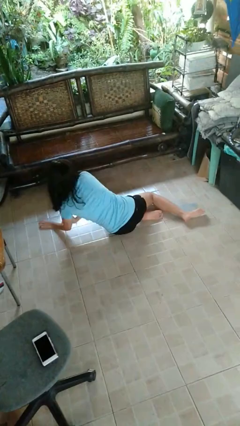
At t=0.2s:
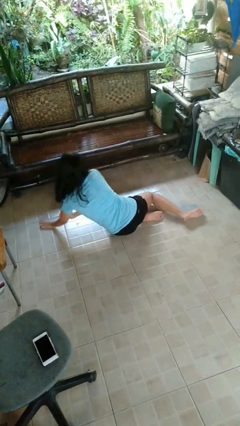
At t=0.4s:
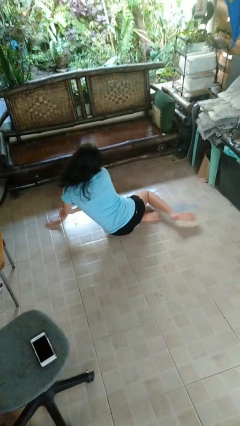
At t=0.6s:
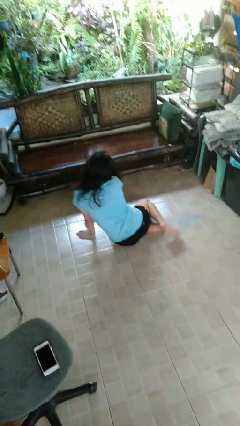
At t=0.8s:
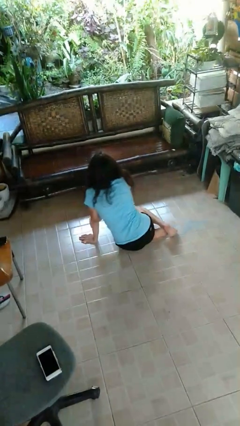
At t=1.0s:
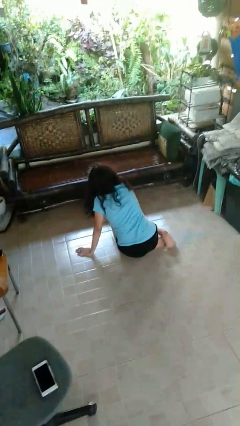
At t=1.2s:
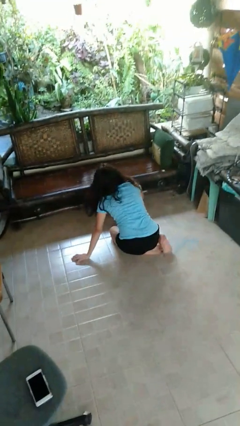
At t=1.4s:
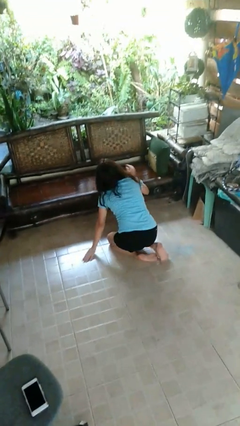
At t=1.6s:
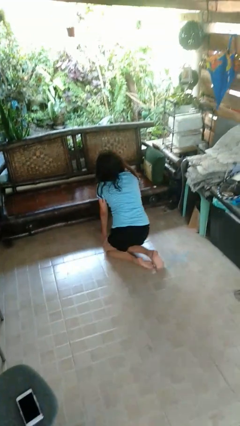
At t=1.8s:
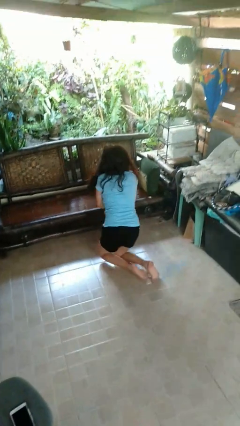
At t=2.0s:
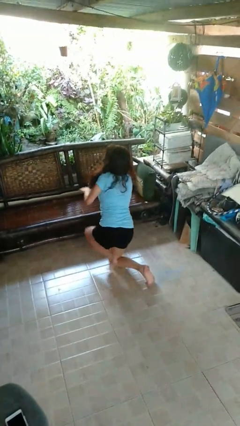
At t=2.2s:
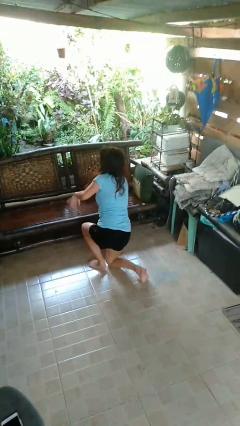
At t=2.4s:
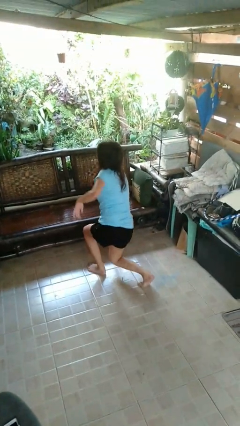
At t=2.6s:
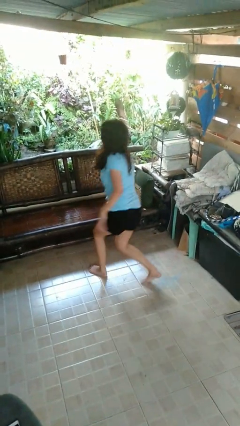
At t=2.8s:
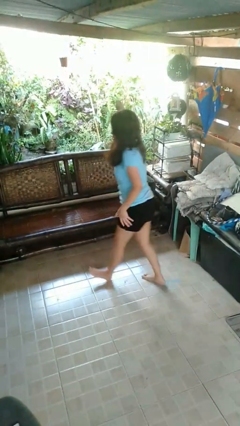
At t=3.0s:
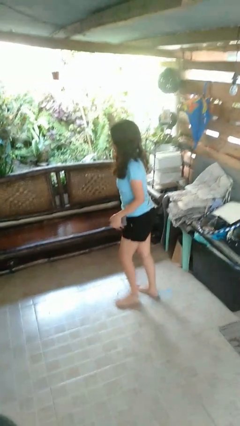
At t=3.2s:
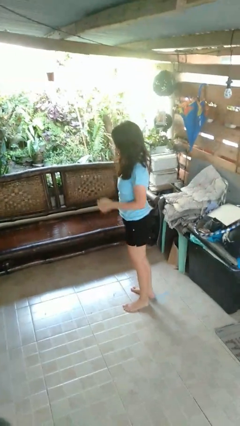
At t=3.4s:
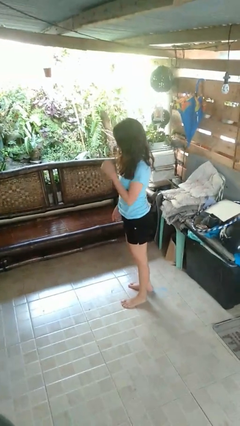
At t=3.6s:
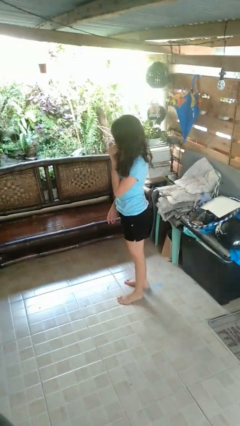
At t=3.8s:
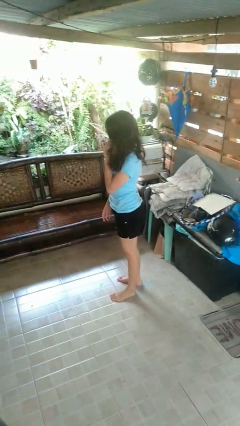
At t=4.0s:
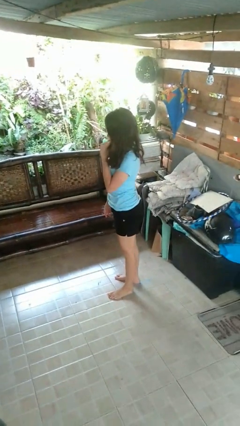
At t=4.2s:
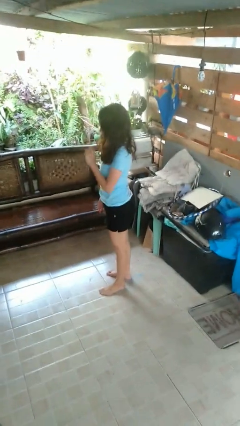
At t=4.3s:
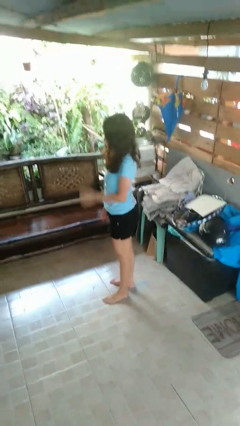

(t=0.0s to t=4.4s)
person stands up from floor

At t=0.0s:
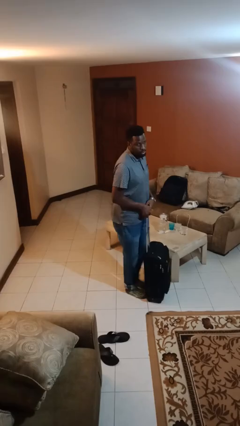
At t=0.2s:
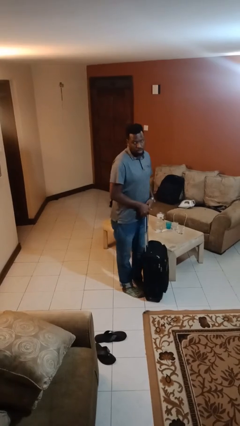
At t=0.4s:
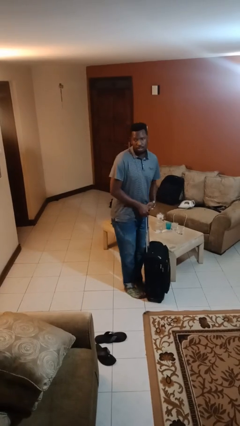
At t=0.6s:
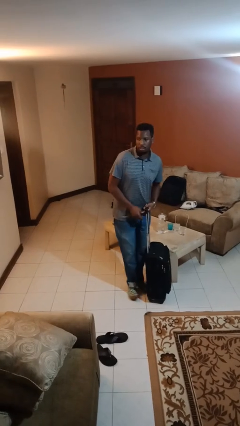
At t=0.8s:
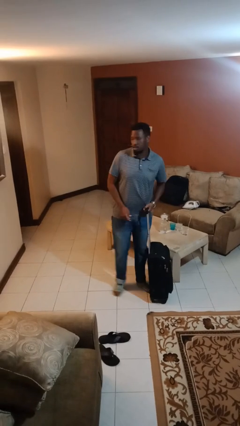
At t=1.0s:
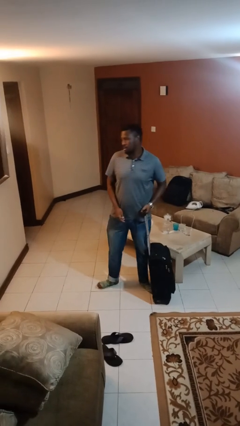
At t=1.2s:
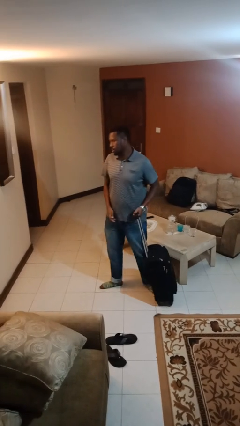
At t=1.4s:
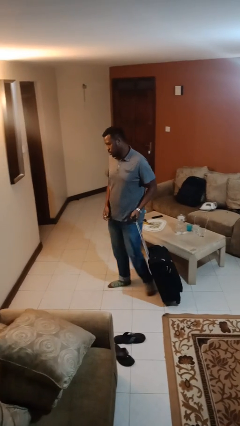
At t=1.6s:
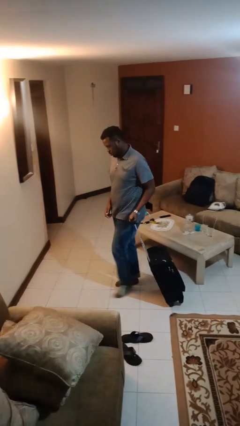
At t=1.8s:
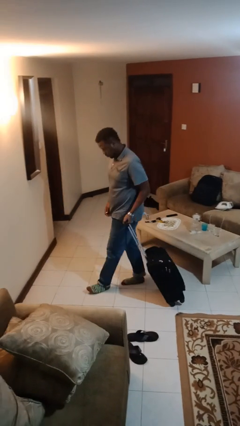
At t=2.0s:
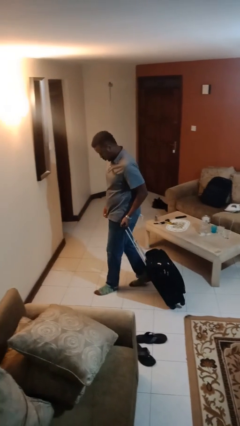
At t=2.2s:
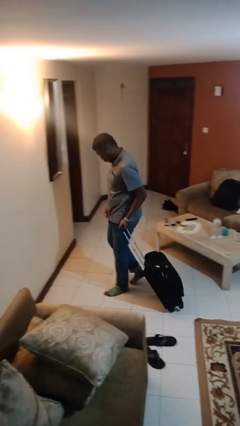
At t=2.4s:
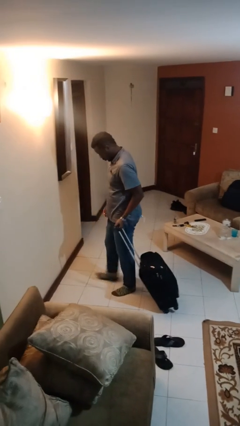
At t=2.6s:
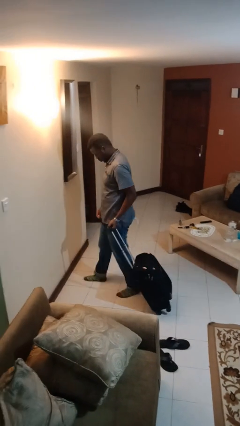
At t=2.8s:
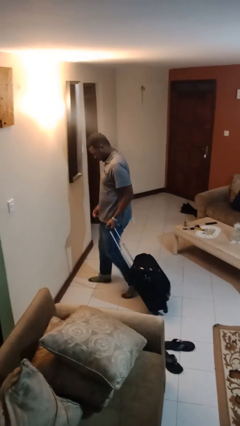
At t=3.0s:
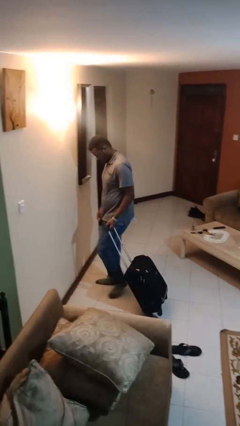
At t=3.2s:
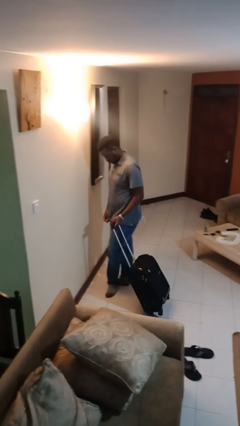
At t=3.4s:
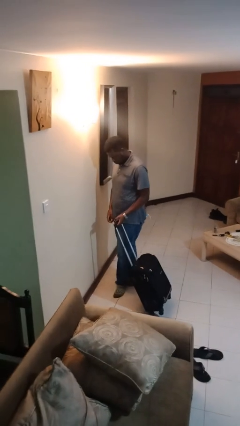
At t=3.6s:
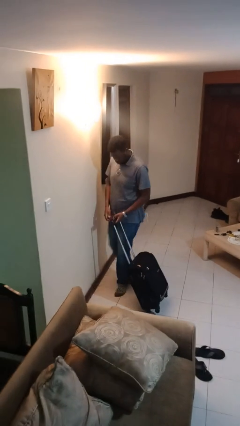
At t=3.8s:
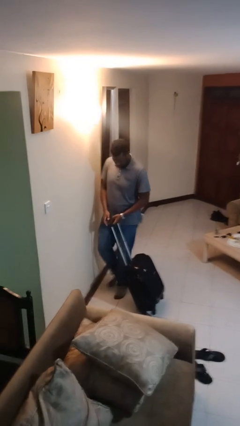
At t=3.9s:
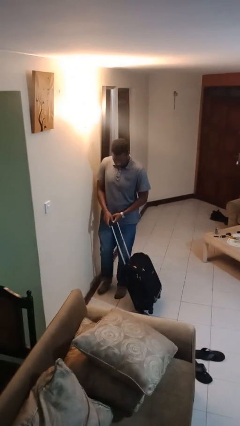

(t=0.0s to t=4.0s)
person pulls wheeled cart

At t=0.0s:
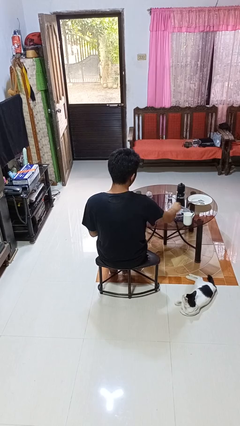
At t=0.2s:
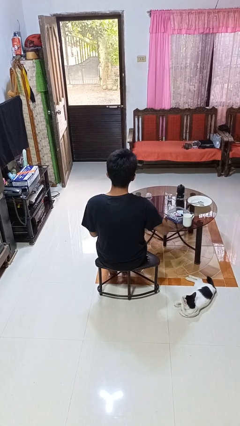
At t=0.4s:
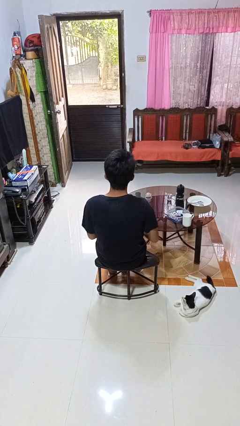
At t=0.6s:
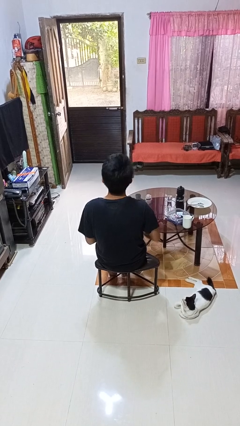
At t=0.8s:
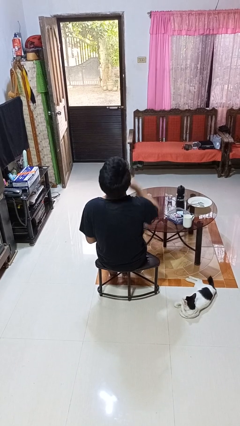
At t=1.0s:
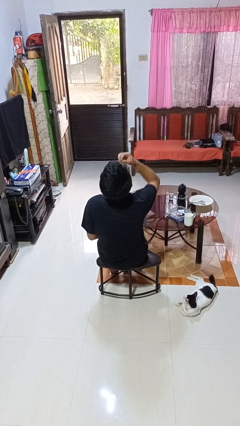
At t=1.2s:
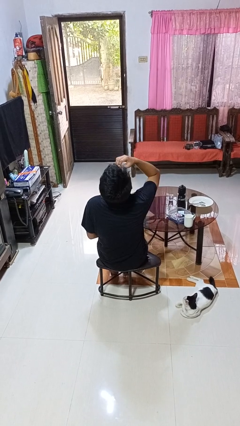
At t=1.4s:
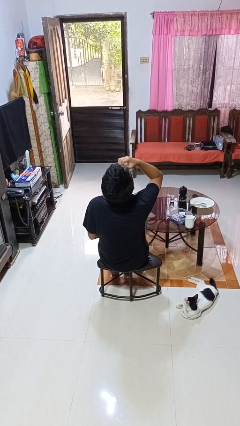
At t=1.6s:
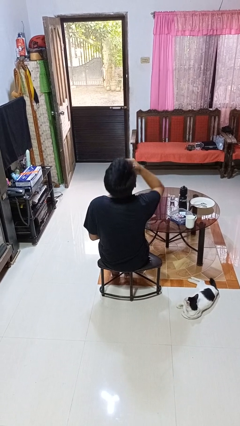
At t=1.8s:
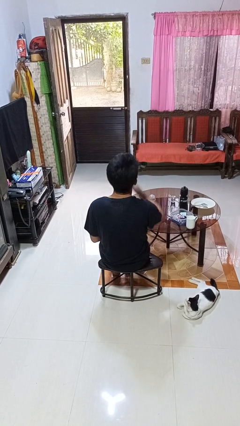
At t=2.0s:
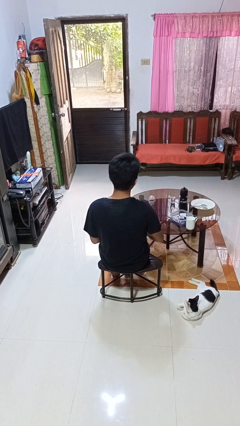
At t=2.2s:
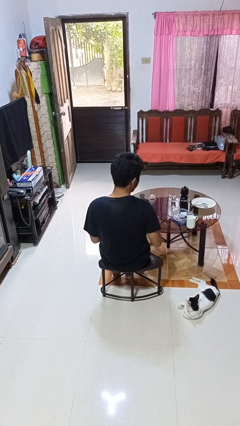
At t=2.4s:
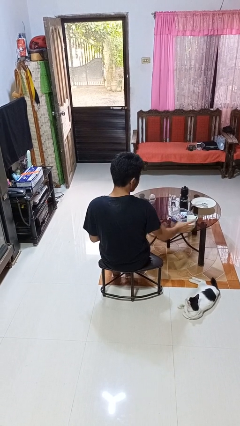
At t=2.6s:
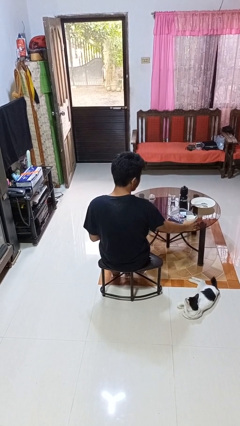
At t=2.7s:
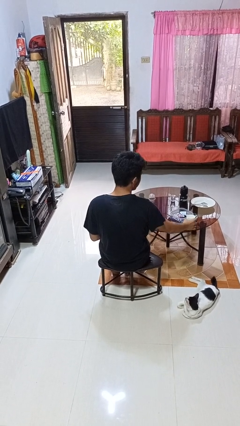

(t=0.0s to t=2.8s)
person takes medicine pills

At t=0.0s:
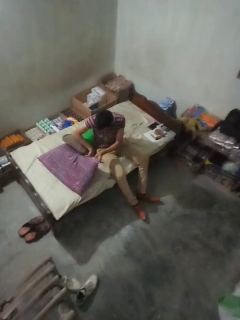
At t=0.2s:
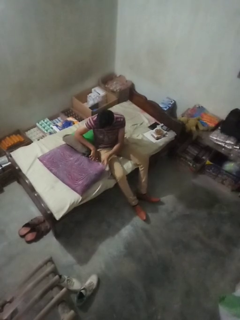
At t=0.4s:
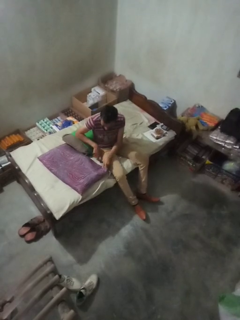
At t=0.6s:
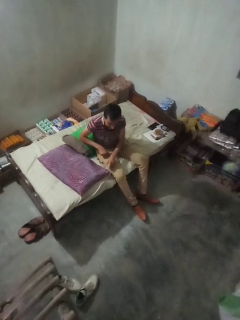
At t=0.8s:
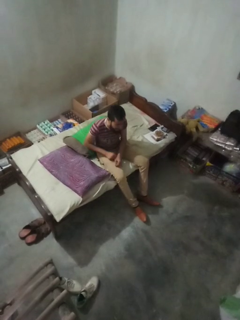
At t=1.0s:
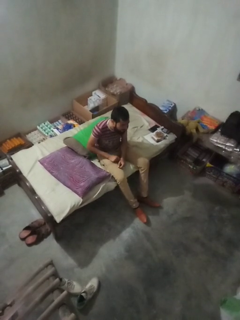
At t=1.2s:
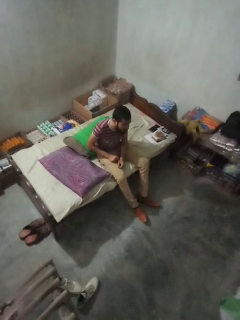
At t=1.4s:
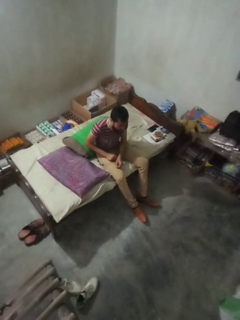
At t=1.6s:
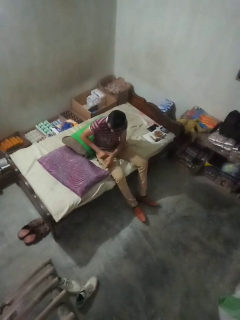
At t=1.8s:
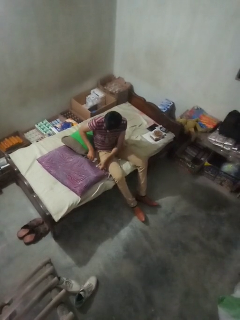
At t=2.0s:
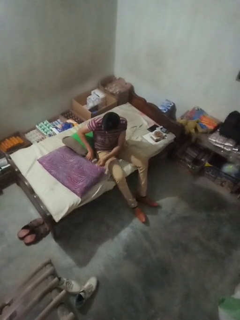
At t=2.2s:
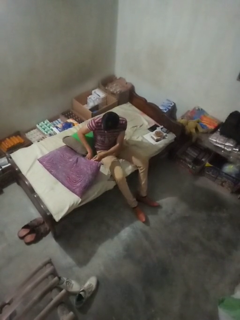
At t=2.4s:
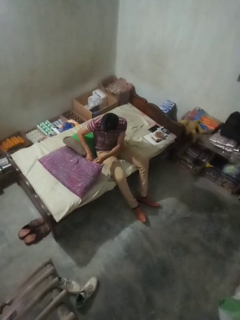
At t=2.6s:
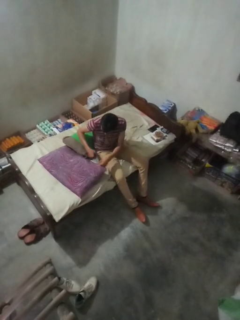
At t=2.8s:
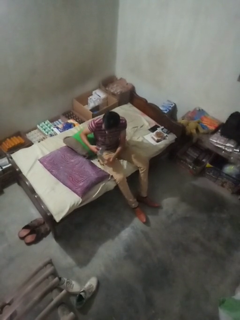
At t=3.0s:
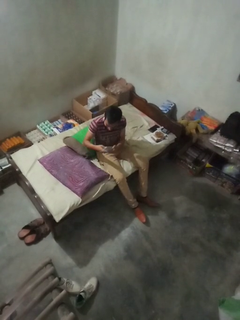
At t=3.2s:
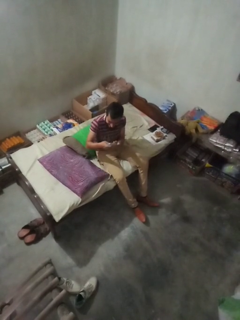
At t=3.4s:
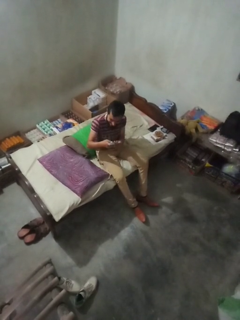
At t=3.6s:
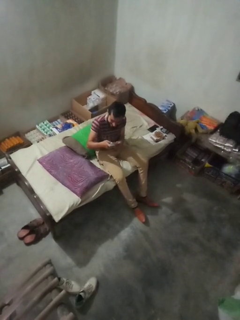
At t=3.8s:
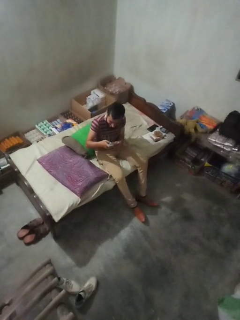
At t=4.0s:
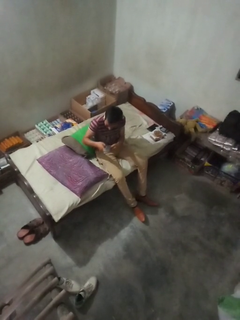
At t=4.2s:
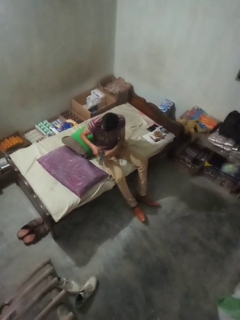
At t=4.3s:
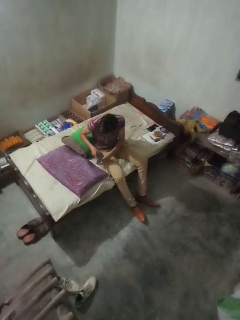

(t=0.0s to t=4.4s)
person searches in couch

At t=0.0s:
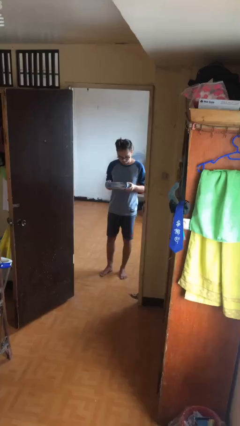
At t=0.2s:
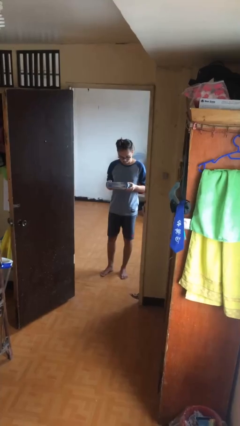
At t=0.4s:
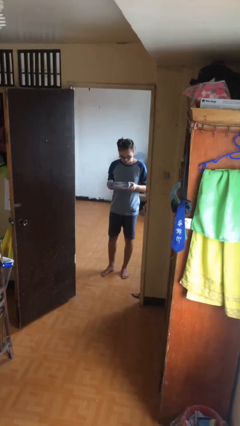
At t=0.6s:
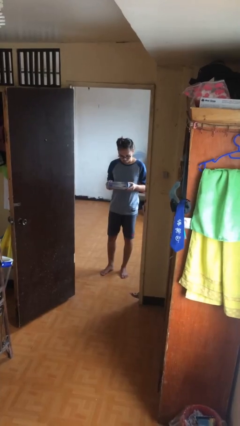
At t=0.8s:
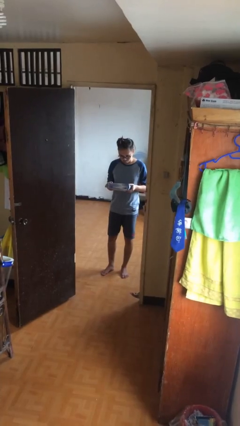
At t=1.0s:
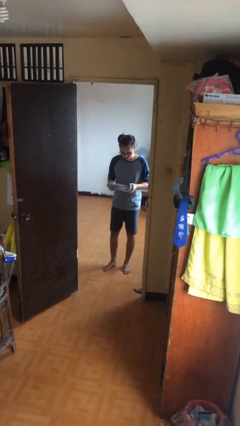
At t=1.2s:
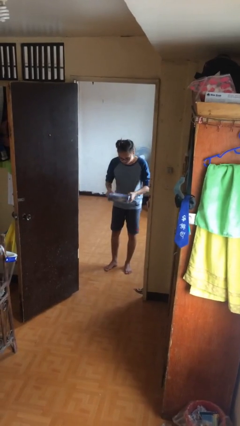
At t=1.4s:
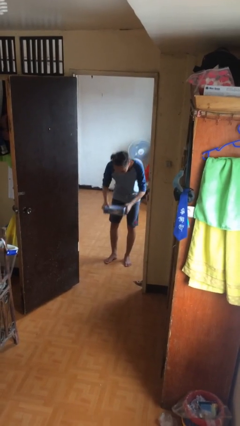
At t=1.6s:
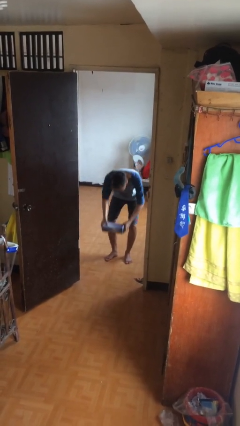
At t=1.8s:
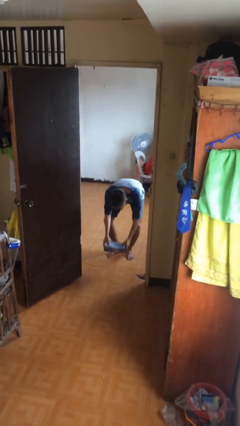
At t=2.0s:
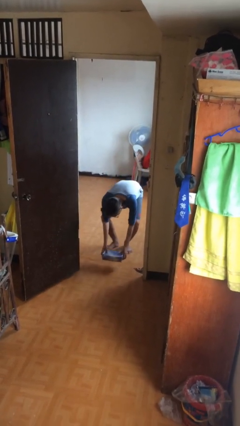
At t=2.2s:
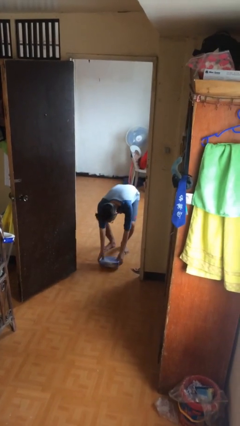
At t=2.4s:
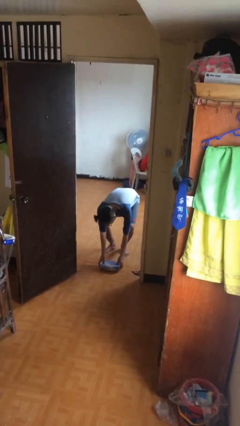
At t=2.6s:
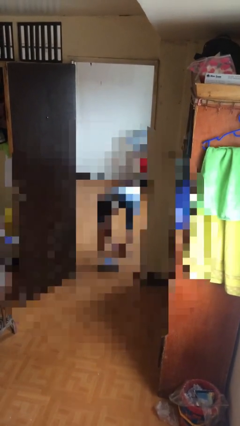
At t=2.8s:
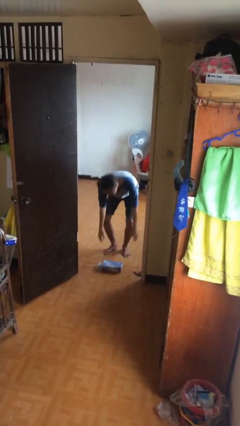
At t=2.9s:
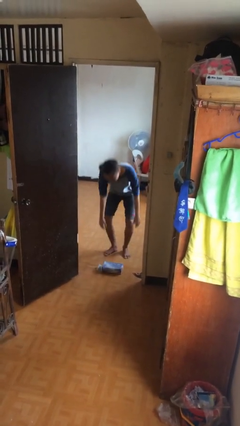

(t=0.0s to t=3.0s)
person puts down object on floor
